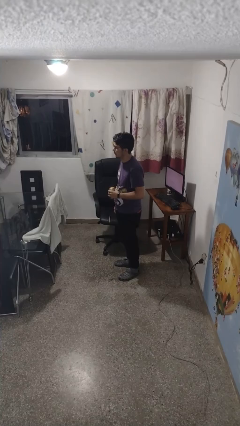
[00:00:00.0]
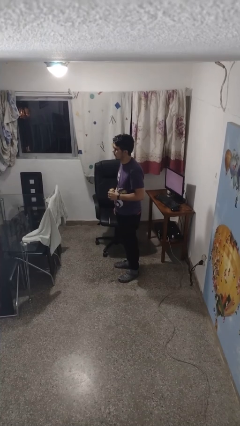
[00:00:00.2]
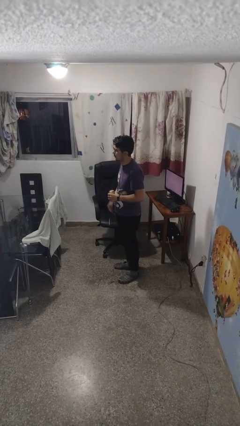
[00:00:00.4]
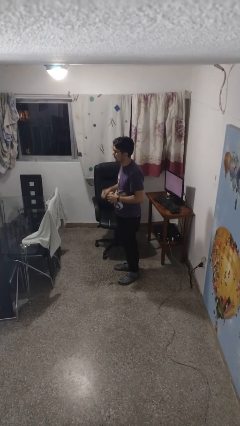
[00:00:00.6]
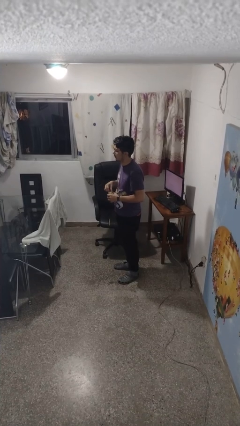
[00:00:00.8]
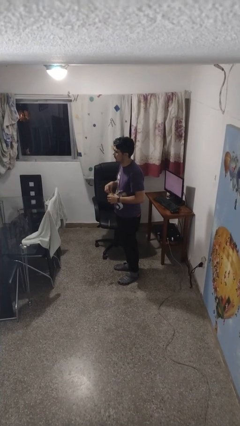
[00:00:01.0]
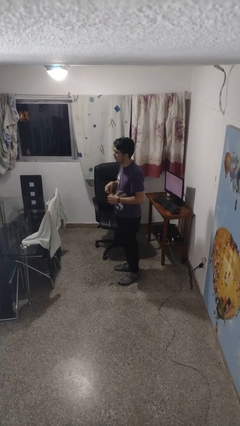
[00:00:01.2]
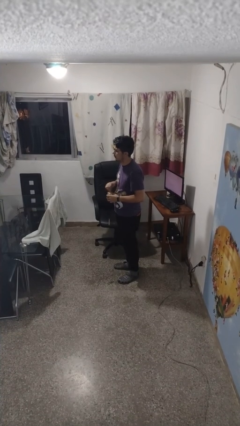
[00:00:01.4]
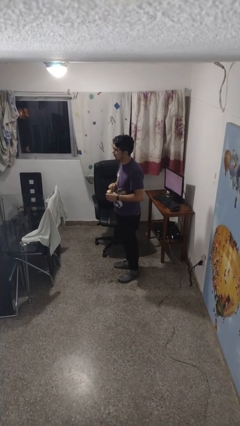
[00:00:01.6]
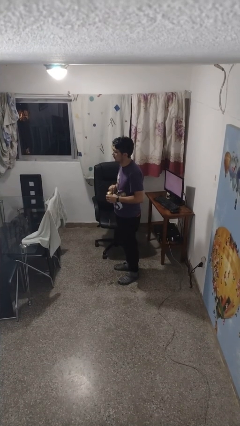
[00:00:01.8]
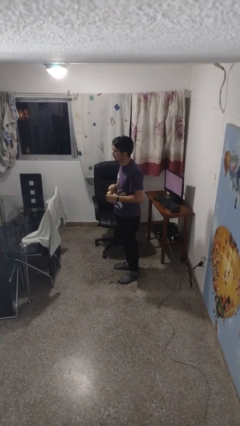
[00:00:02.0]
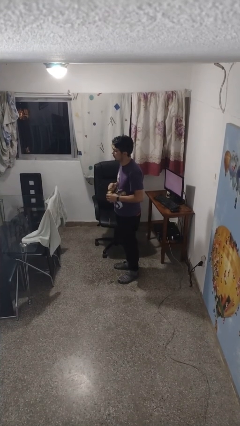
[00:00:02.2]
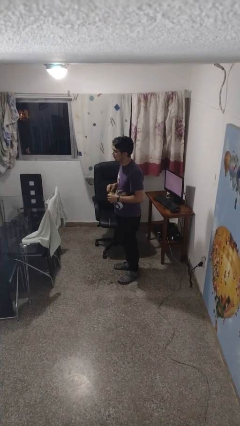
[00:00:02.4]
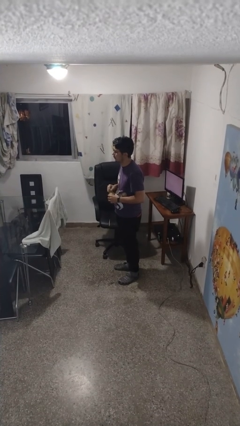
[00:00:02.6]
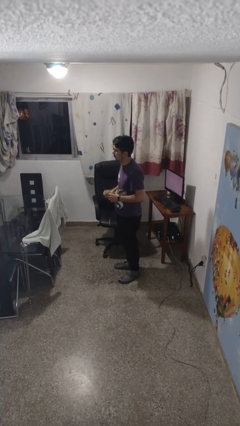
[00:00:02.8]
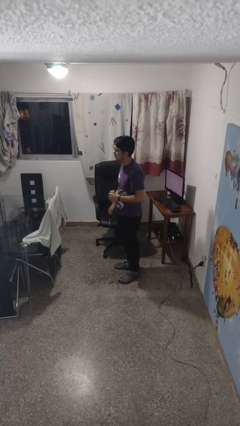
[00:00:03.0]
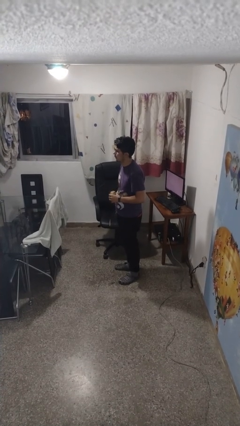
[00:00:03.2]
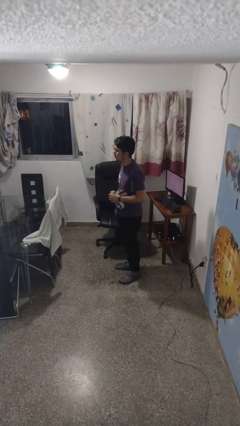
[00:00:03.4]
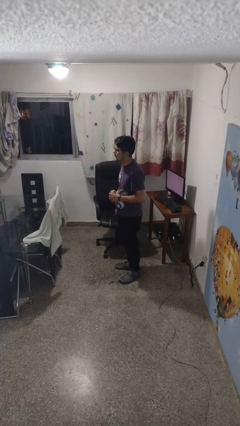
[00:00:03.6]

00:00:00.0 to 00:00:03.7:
person opens beverage can

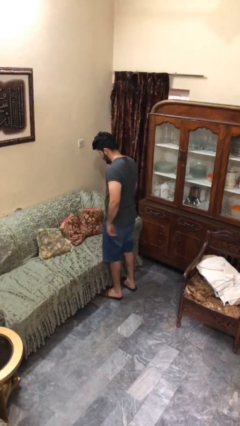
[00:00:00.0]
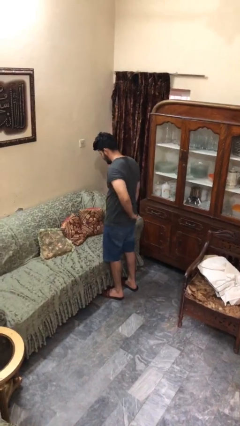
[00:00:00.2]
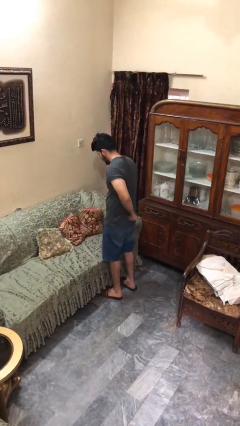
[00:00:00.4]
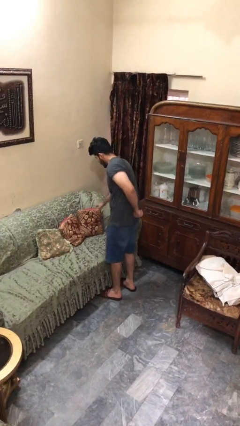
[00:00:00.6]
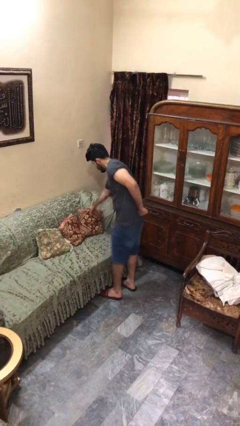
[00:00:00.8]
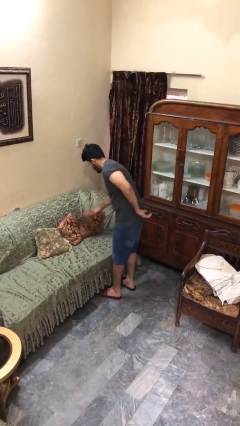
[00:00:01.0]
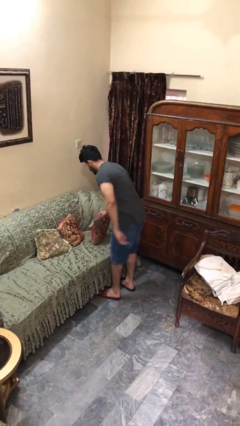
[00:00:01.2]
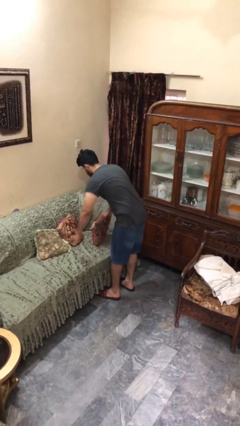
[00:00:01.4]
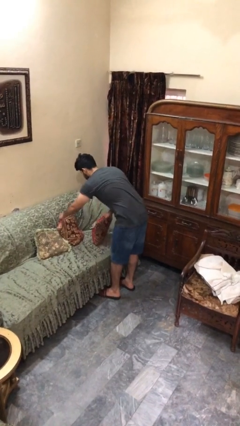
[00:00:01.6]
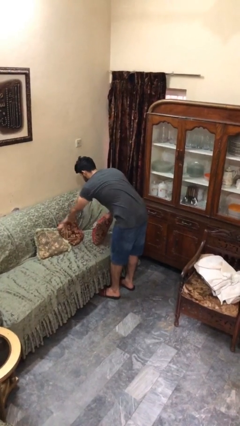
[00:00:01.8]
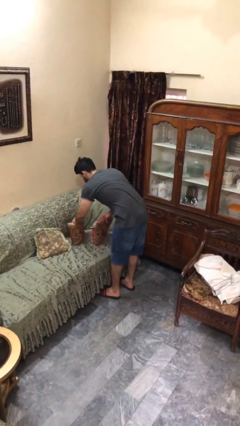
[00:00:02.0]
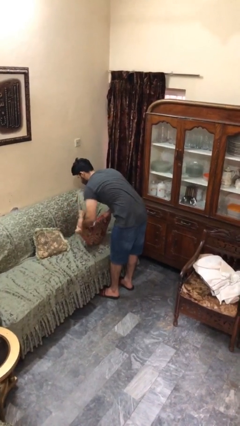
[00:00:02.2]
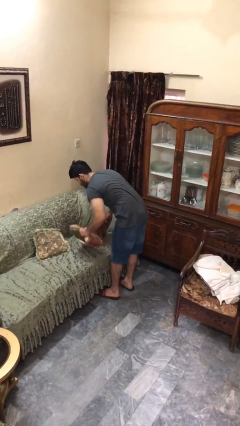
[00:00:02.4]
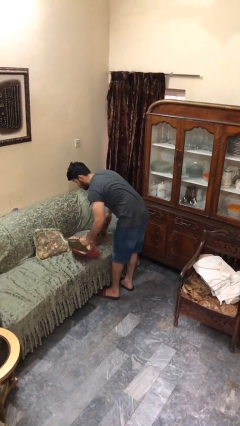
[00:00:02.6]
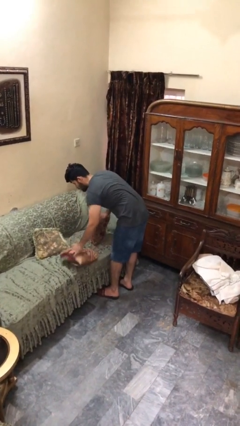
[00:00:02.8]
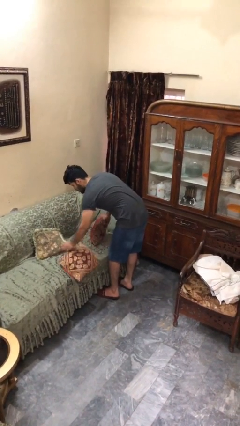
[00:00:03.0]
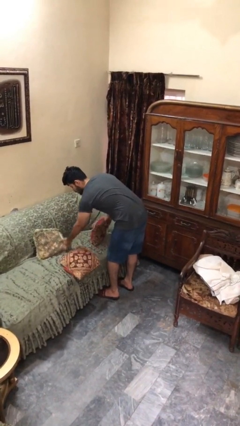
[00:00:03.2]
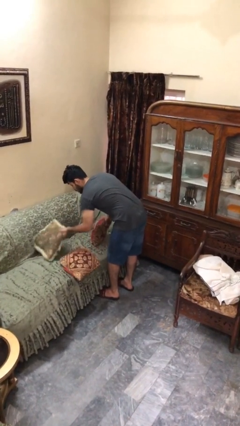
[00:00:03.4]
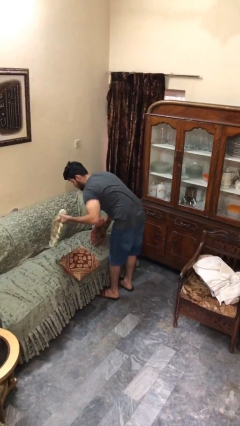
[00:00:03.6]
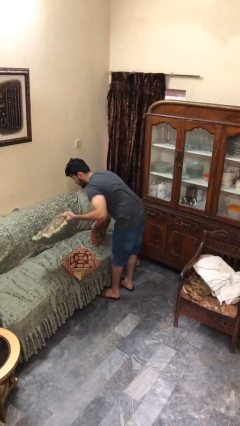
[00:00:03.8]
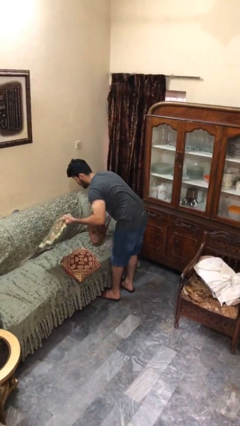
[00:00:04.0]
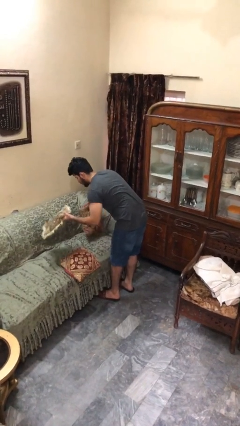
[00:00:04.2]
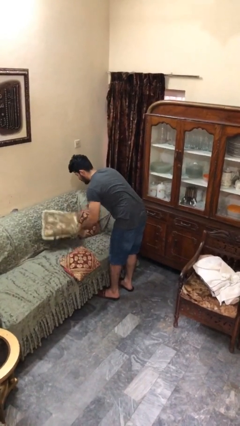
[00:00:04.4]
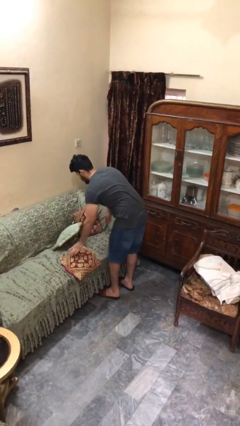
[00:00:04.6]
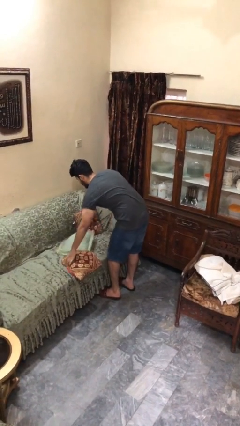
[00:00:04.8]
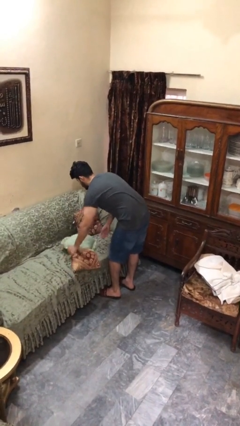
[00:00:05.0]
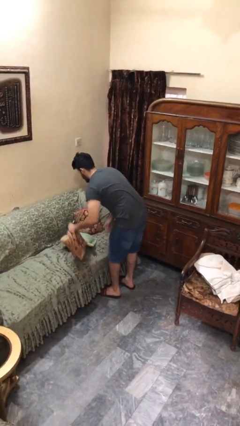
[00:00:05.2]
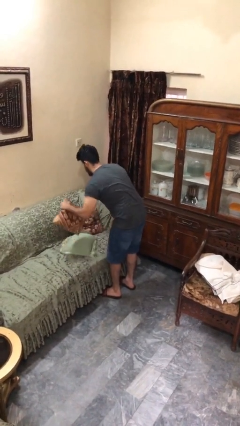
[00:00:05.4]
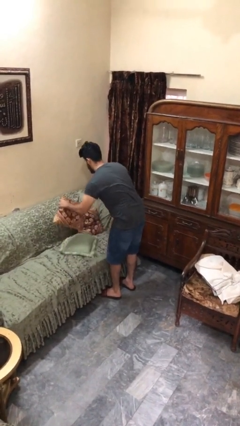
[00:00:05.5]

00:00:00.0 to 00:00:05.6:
person searches in couch

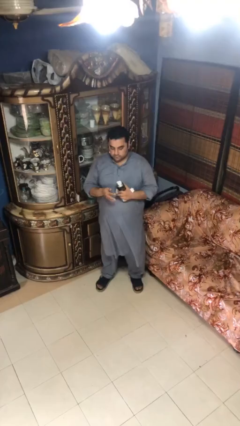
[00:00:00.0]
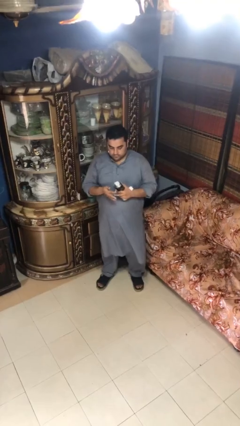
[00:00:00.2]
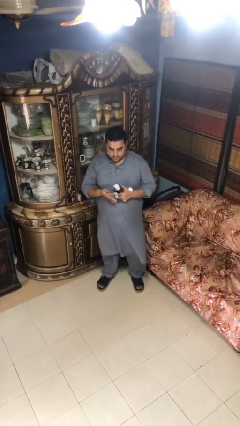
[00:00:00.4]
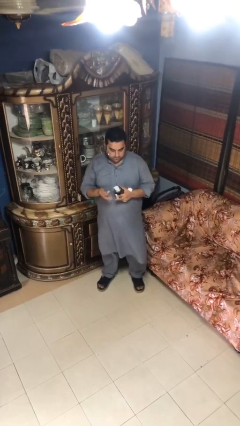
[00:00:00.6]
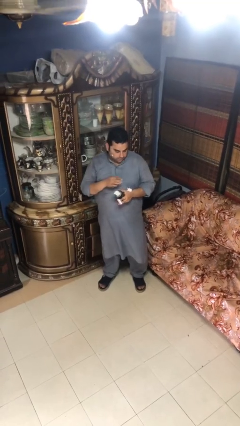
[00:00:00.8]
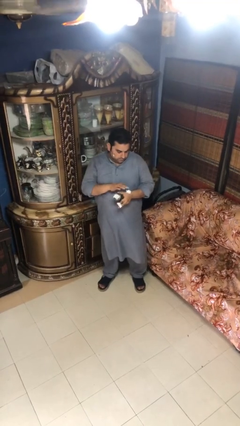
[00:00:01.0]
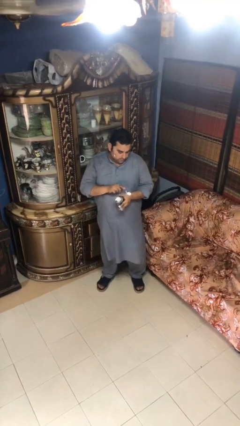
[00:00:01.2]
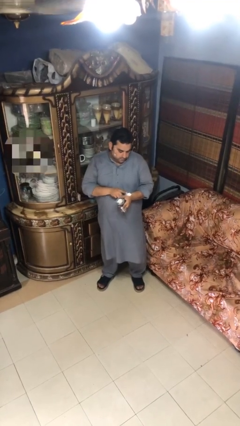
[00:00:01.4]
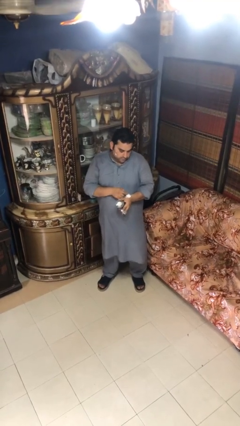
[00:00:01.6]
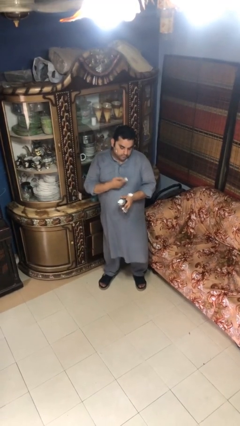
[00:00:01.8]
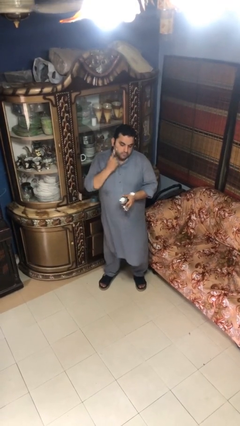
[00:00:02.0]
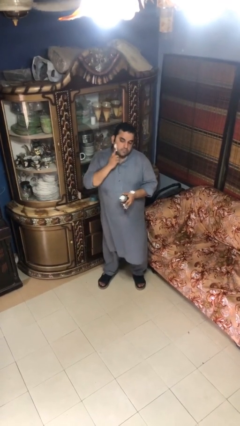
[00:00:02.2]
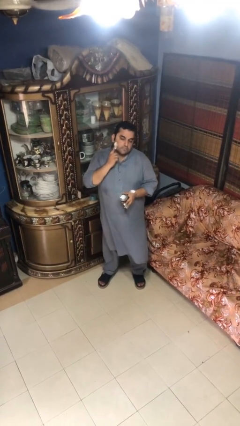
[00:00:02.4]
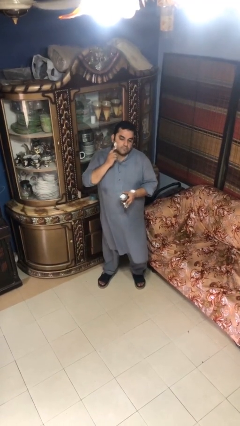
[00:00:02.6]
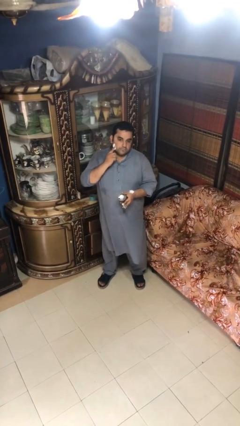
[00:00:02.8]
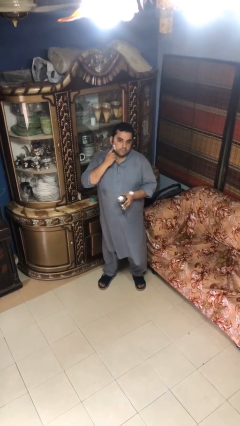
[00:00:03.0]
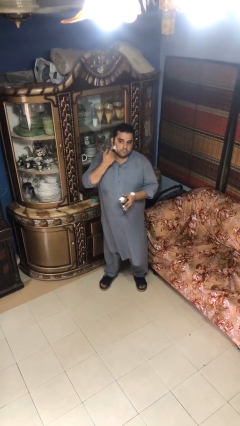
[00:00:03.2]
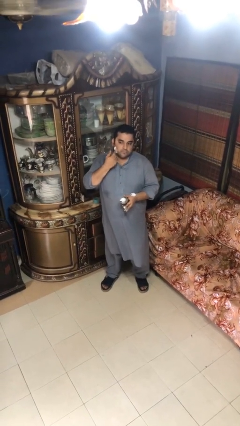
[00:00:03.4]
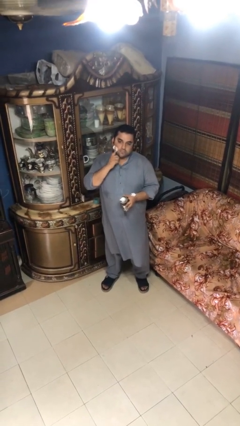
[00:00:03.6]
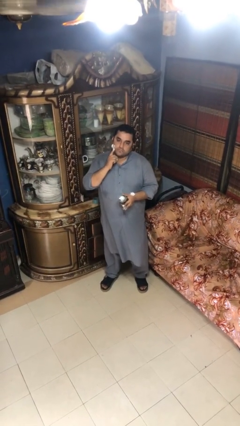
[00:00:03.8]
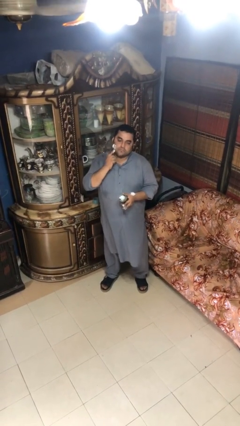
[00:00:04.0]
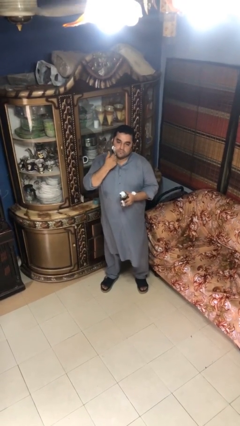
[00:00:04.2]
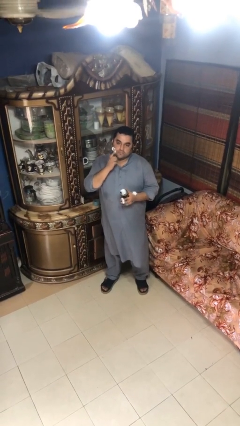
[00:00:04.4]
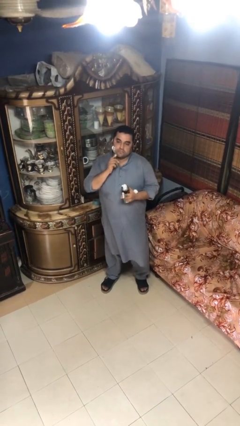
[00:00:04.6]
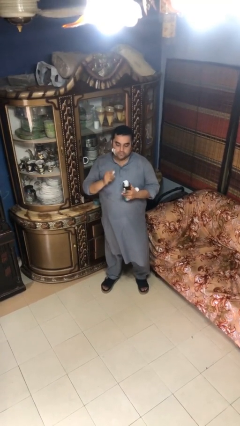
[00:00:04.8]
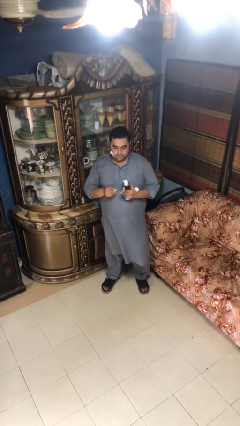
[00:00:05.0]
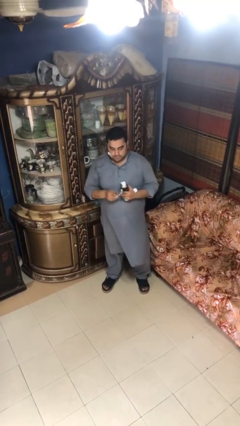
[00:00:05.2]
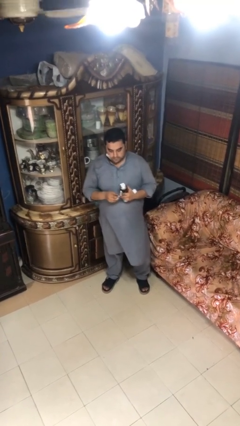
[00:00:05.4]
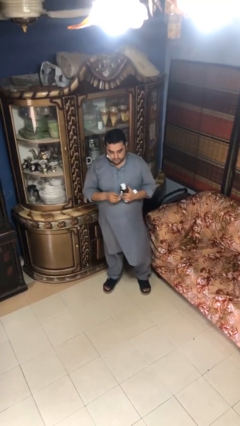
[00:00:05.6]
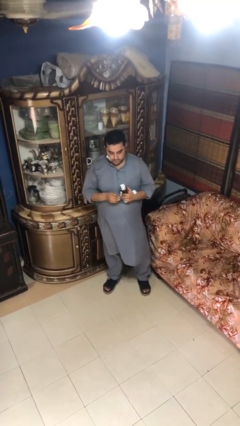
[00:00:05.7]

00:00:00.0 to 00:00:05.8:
person applies shaving cream

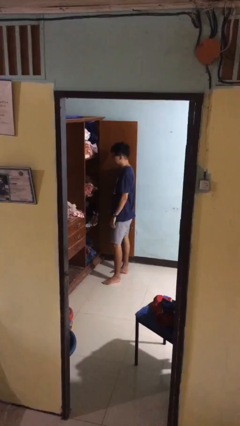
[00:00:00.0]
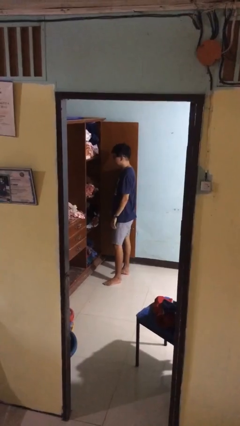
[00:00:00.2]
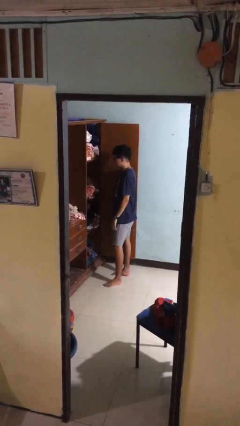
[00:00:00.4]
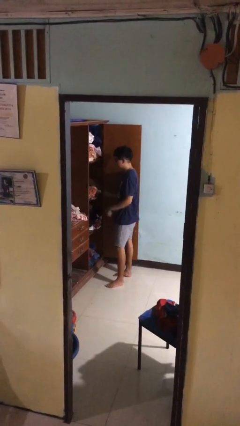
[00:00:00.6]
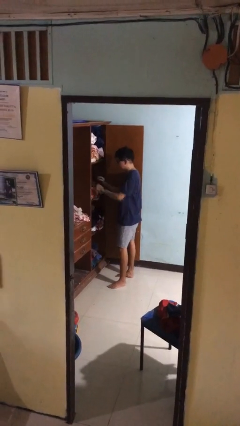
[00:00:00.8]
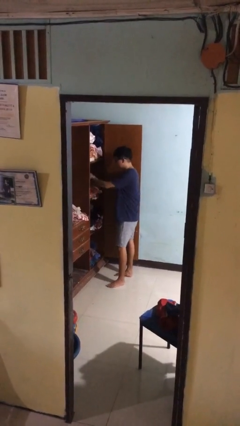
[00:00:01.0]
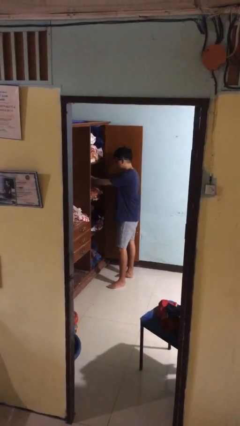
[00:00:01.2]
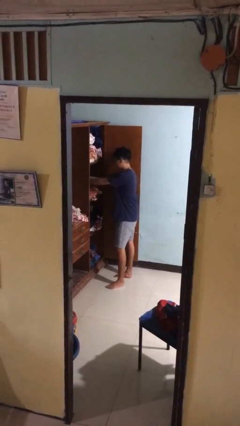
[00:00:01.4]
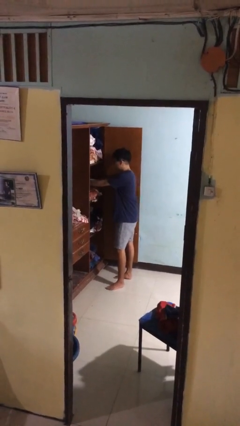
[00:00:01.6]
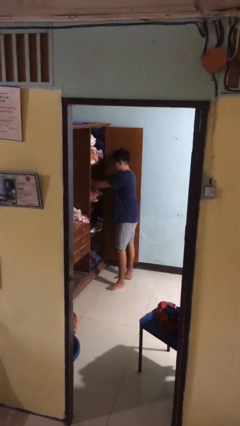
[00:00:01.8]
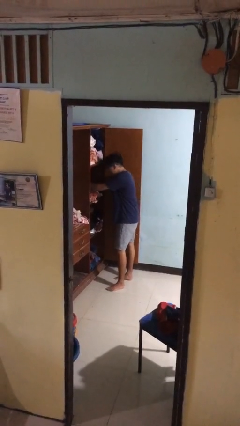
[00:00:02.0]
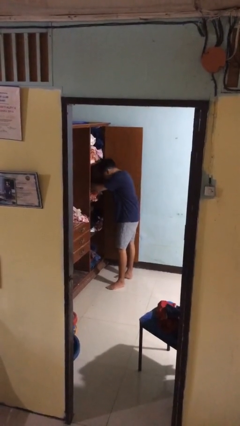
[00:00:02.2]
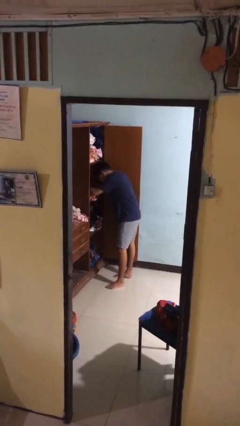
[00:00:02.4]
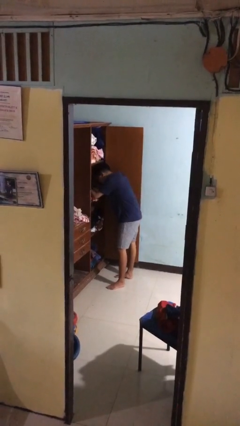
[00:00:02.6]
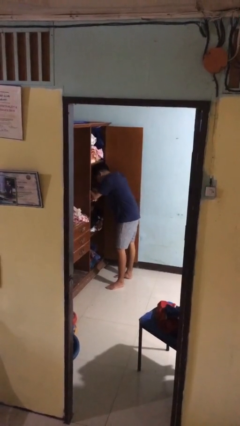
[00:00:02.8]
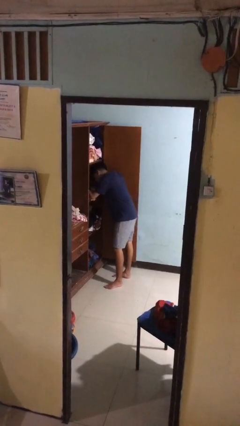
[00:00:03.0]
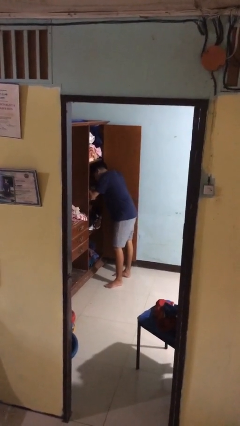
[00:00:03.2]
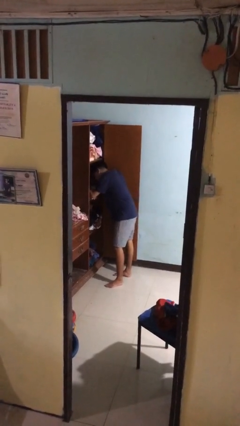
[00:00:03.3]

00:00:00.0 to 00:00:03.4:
person searches in cabinet
